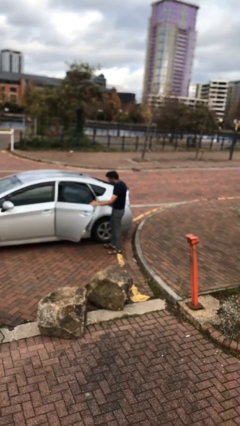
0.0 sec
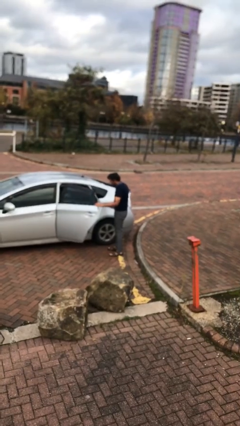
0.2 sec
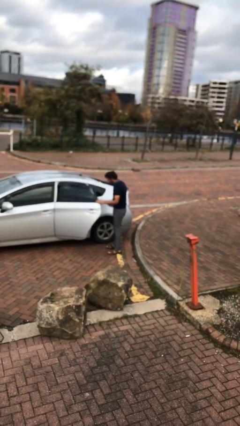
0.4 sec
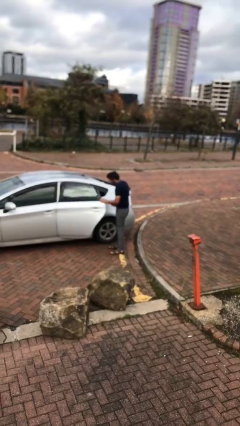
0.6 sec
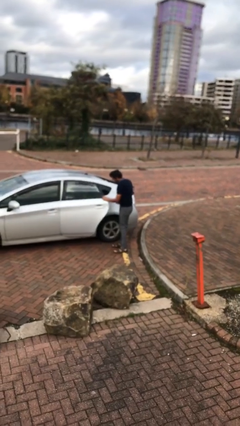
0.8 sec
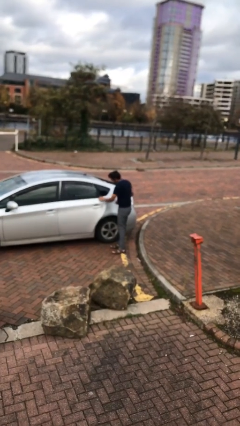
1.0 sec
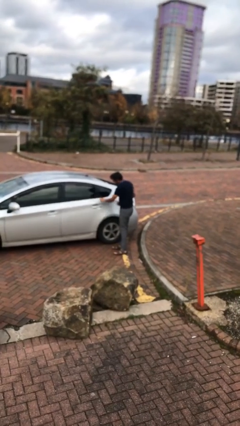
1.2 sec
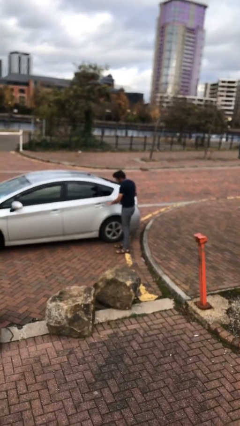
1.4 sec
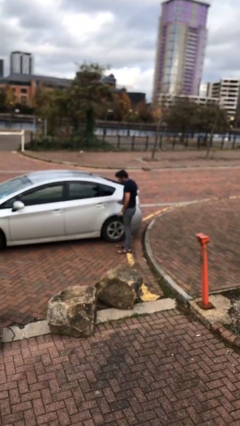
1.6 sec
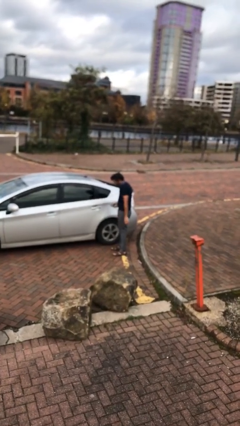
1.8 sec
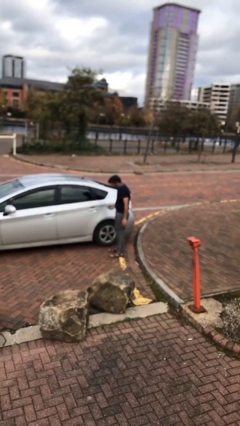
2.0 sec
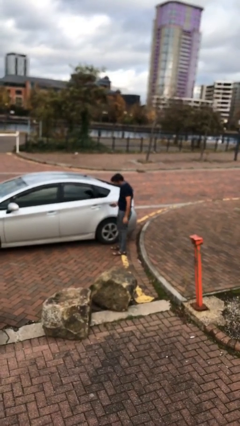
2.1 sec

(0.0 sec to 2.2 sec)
person closes car door

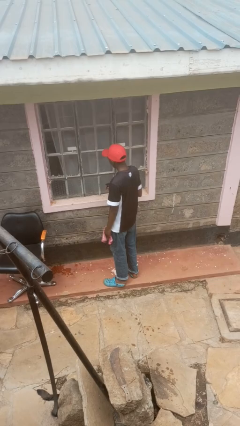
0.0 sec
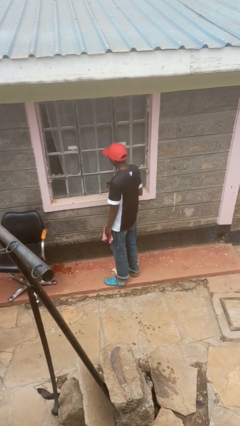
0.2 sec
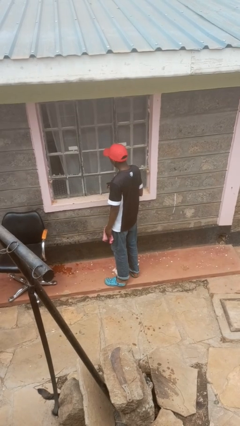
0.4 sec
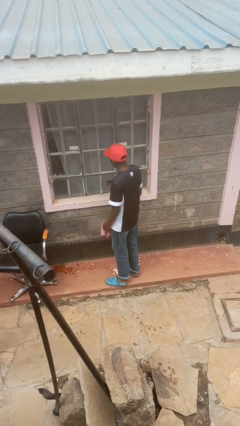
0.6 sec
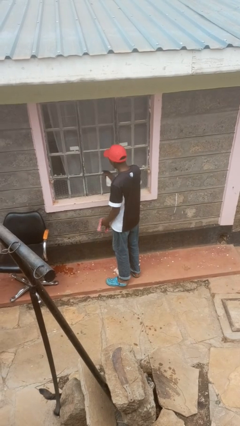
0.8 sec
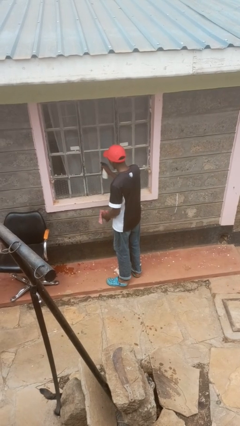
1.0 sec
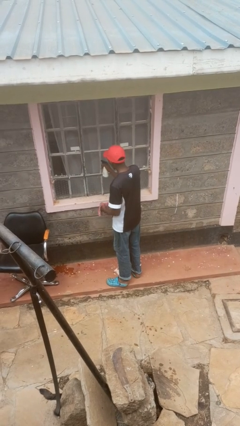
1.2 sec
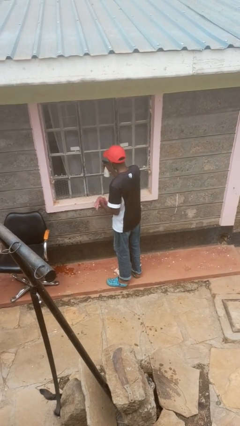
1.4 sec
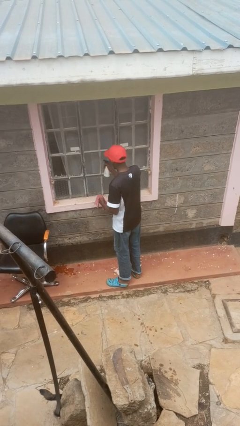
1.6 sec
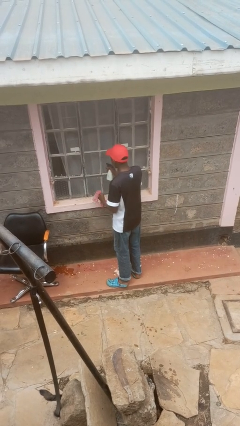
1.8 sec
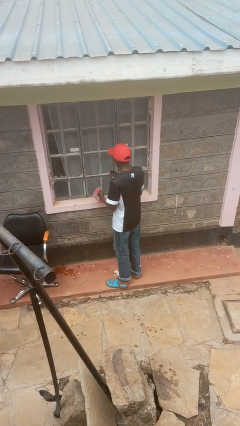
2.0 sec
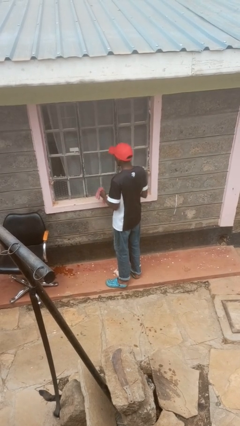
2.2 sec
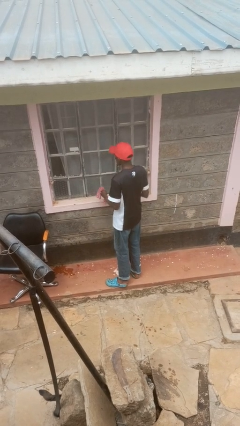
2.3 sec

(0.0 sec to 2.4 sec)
person sprays from bottle

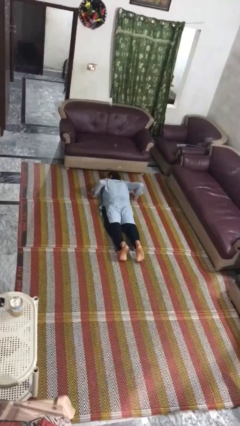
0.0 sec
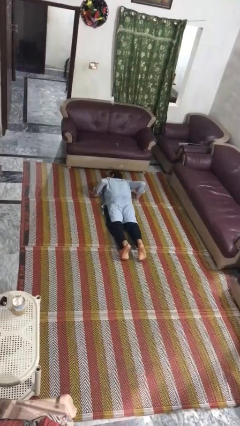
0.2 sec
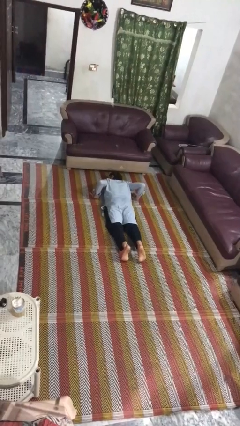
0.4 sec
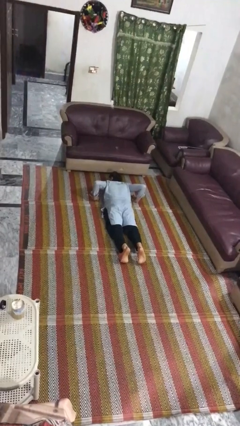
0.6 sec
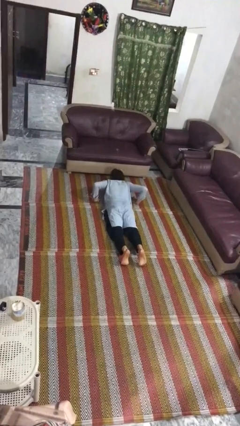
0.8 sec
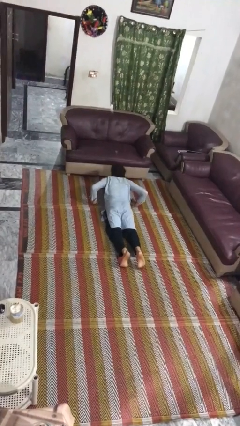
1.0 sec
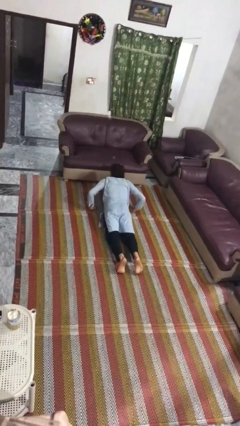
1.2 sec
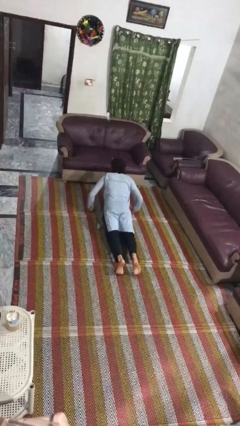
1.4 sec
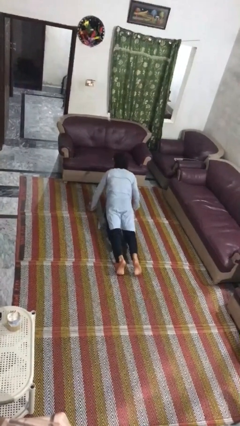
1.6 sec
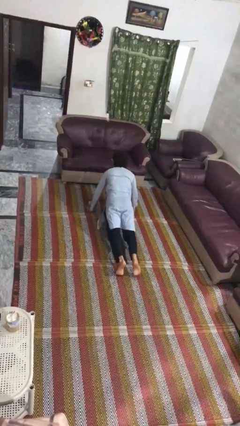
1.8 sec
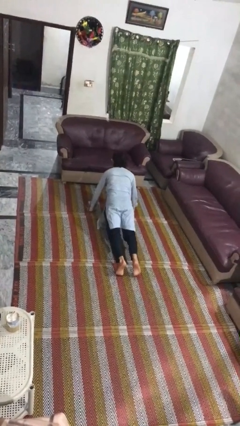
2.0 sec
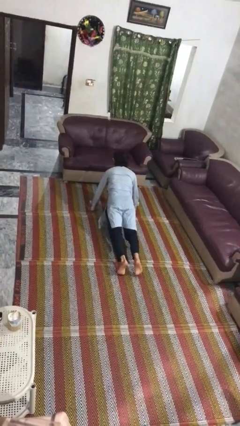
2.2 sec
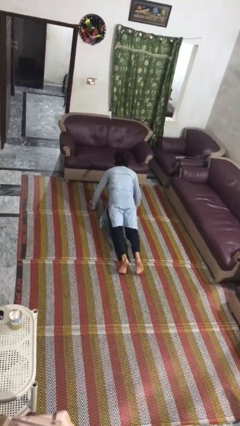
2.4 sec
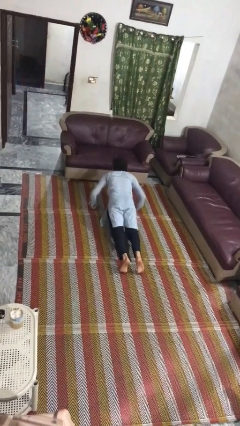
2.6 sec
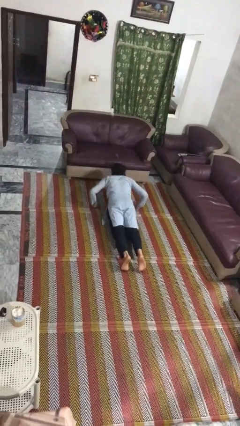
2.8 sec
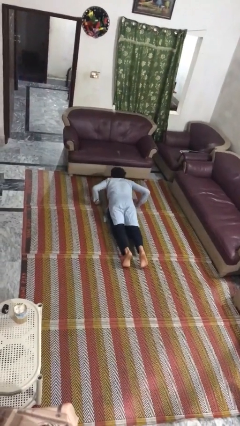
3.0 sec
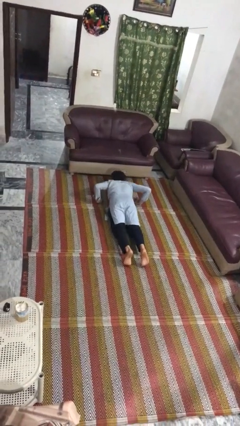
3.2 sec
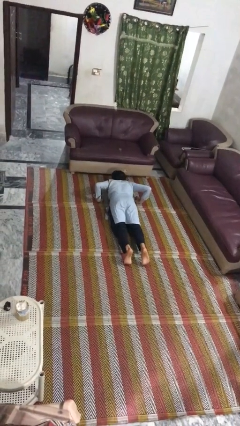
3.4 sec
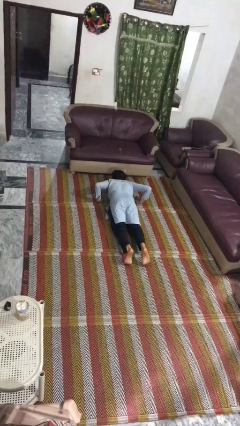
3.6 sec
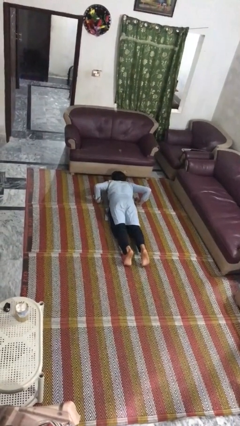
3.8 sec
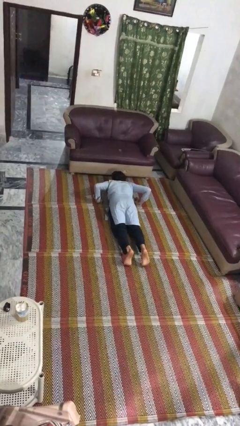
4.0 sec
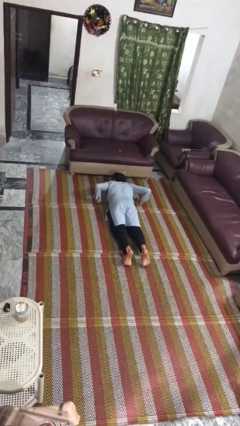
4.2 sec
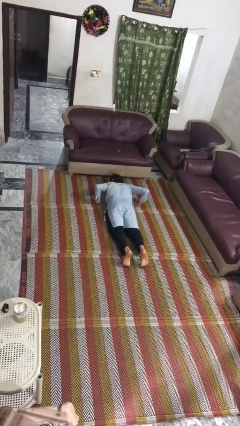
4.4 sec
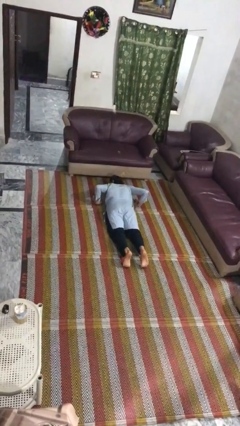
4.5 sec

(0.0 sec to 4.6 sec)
person exercises with pushup

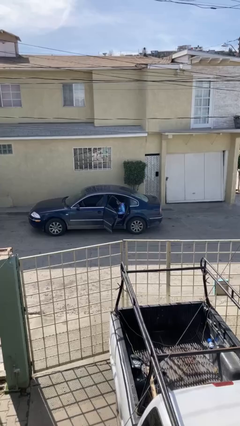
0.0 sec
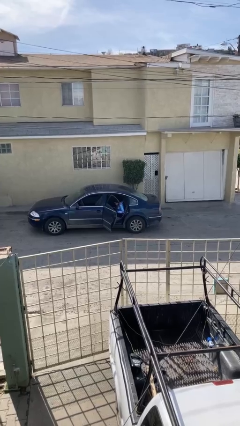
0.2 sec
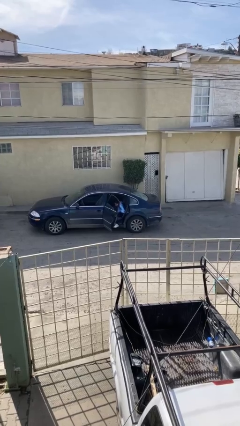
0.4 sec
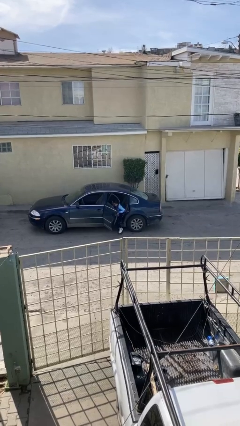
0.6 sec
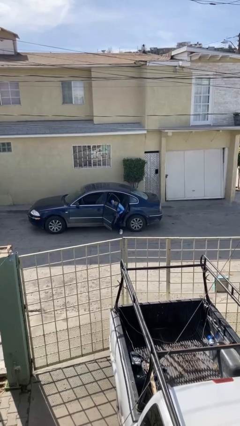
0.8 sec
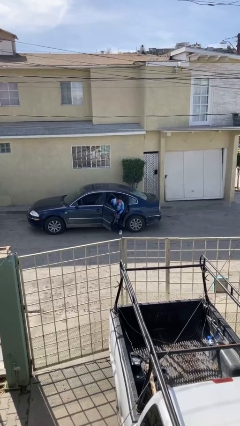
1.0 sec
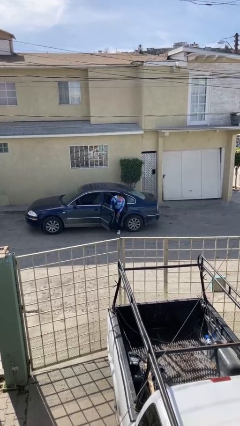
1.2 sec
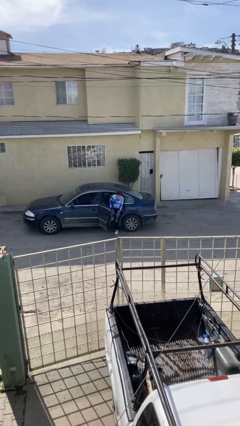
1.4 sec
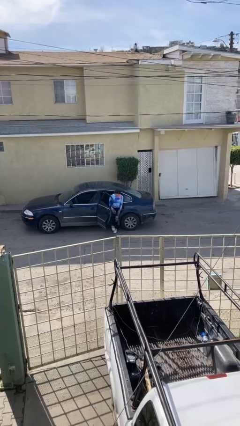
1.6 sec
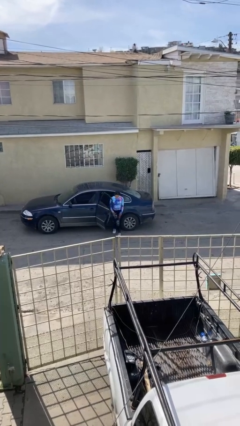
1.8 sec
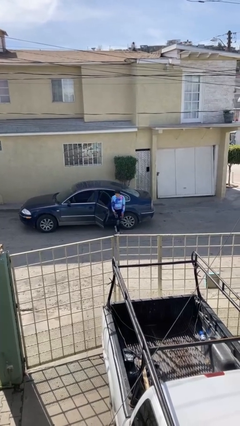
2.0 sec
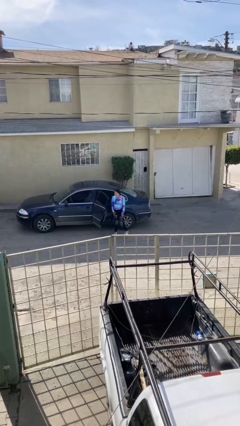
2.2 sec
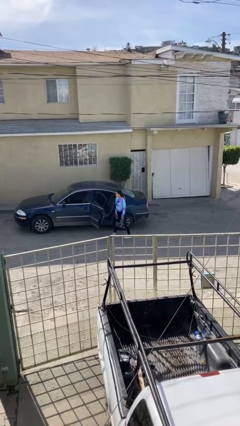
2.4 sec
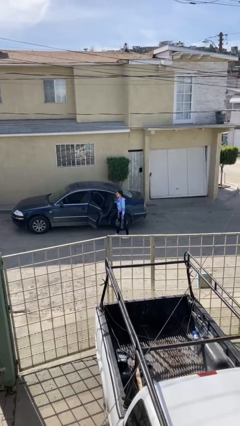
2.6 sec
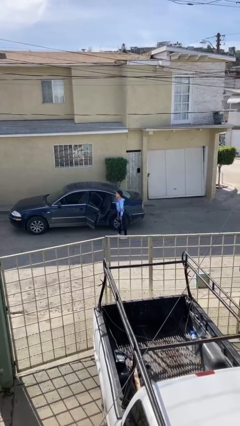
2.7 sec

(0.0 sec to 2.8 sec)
person exits car

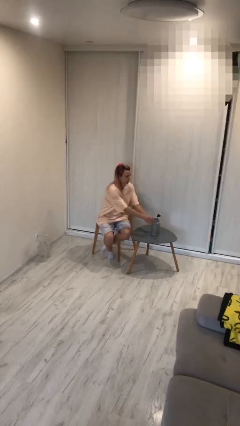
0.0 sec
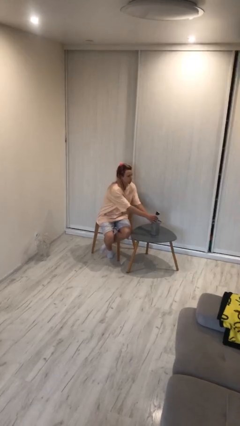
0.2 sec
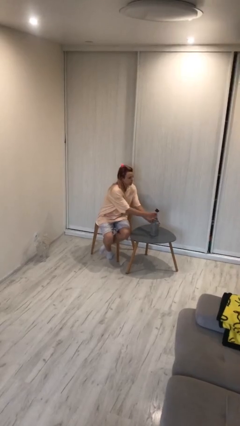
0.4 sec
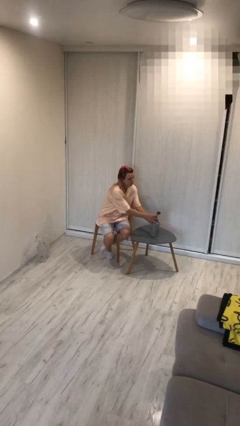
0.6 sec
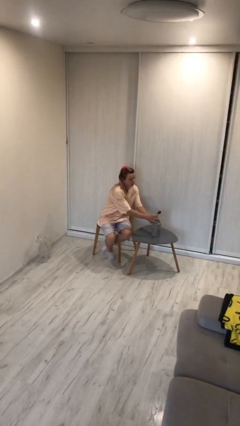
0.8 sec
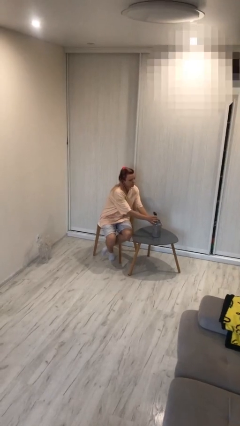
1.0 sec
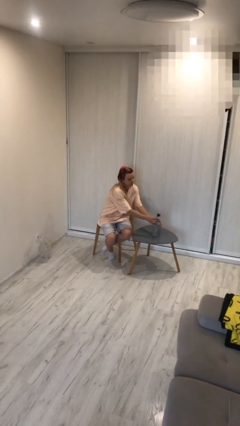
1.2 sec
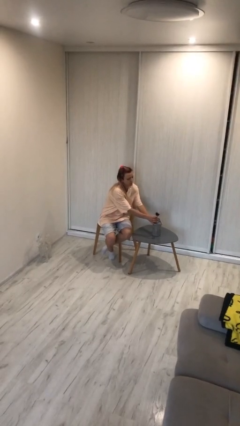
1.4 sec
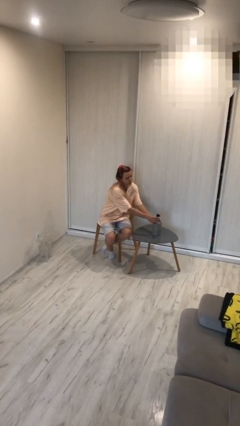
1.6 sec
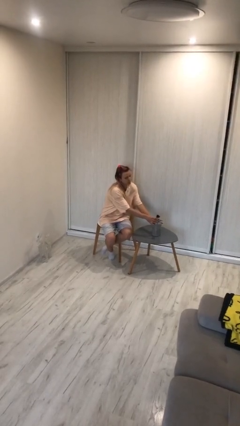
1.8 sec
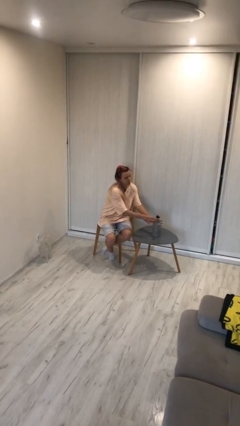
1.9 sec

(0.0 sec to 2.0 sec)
person arranges flowers in vase

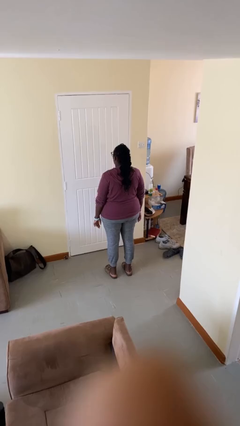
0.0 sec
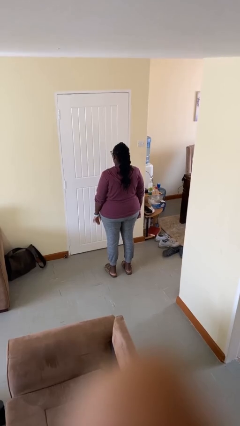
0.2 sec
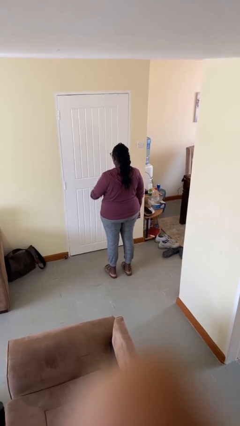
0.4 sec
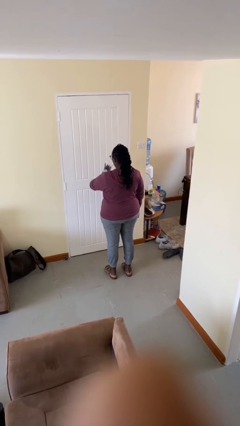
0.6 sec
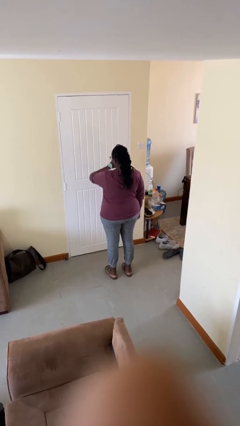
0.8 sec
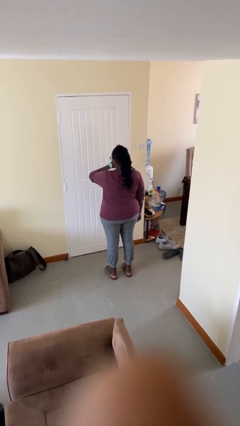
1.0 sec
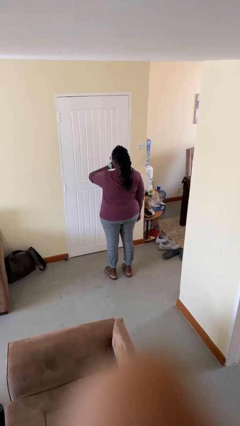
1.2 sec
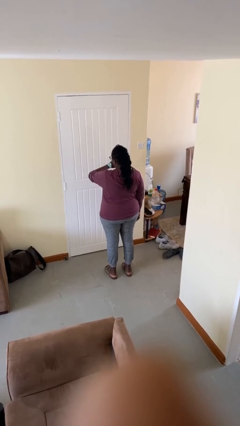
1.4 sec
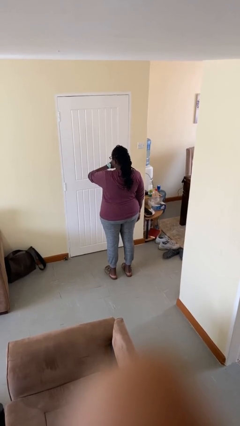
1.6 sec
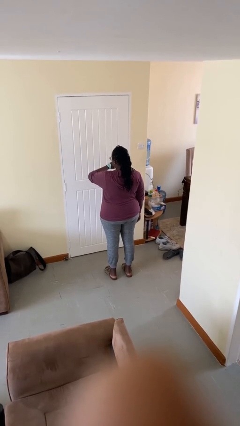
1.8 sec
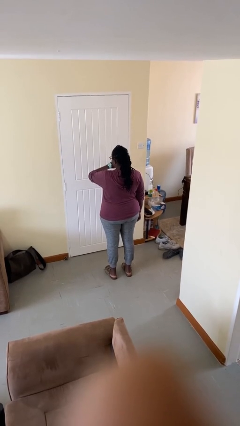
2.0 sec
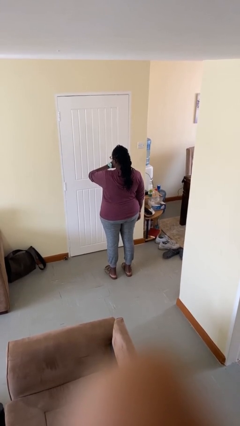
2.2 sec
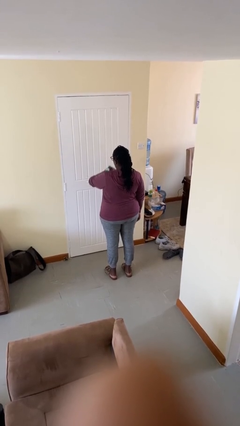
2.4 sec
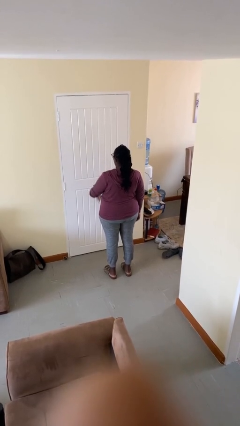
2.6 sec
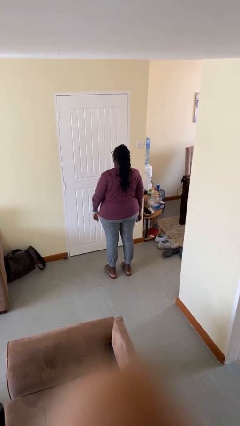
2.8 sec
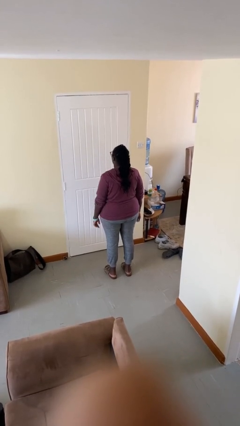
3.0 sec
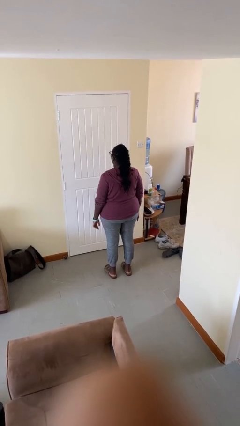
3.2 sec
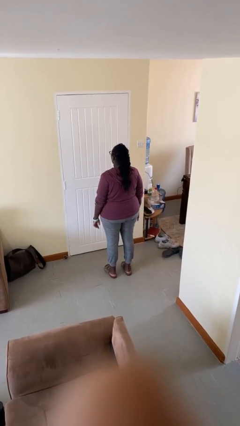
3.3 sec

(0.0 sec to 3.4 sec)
person looks at wristwatch

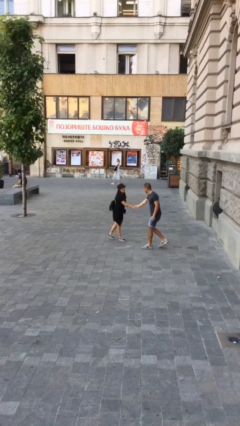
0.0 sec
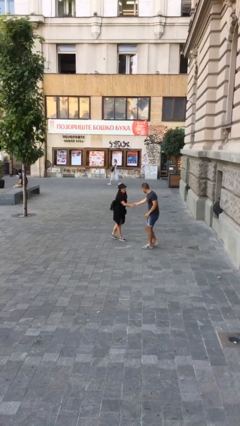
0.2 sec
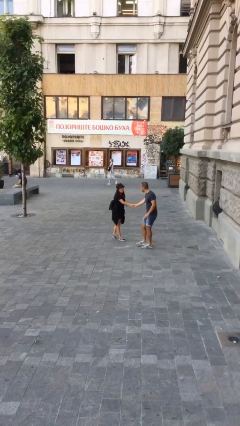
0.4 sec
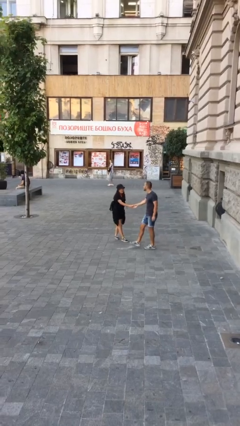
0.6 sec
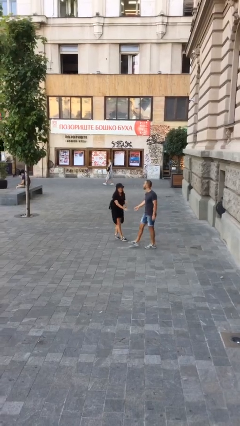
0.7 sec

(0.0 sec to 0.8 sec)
person shakes hand
